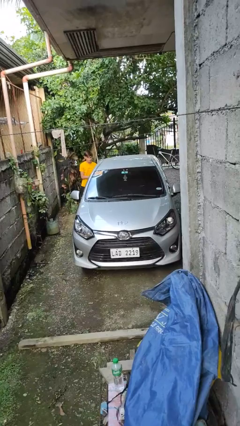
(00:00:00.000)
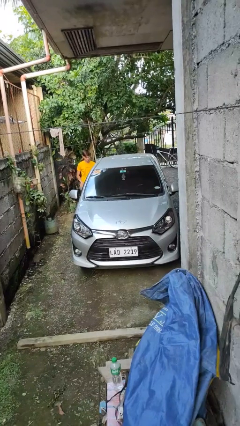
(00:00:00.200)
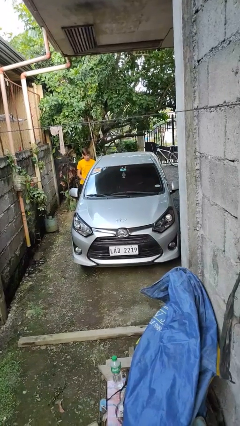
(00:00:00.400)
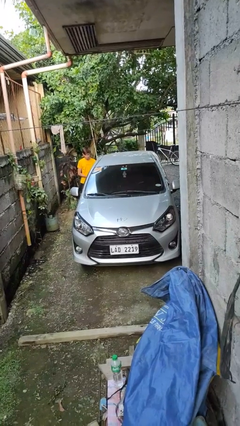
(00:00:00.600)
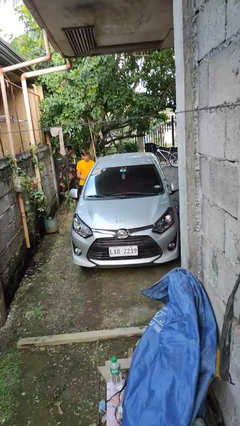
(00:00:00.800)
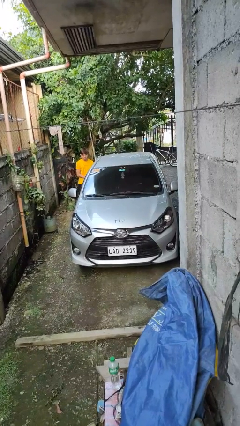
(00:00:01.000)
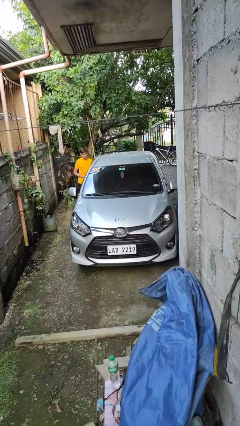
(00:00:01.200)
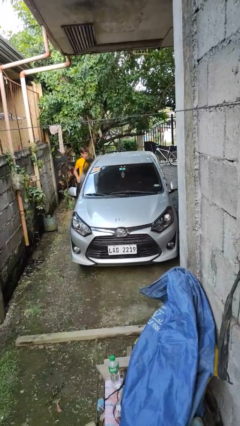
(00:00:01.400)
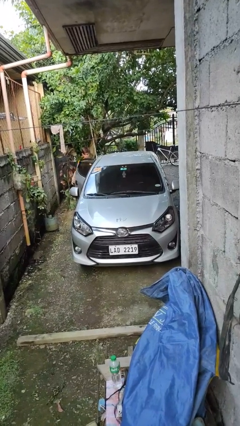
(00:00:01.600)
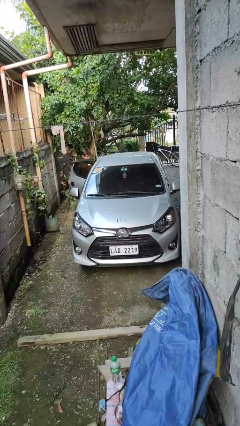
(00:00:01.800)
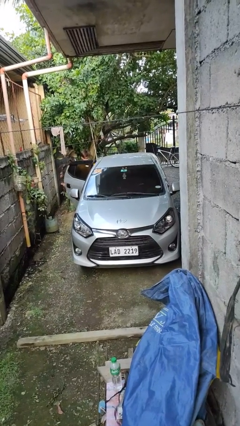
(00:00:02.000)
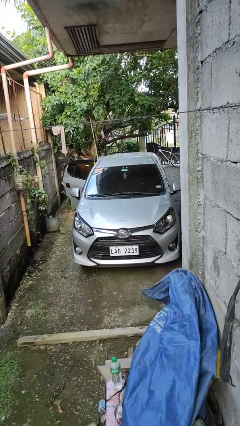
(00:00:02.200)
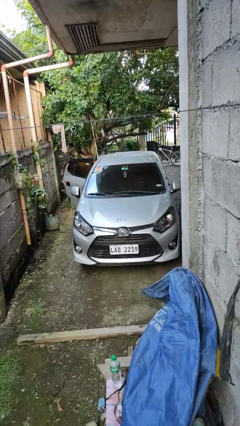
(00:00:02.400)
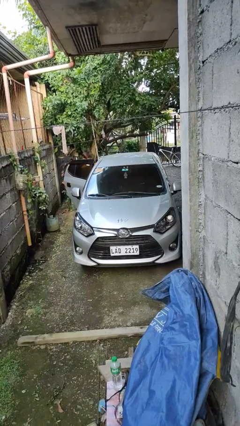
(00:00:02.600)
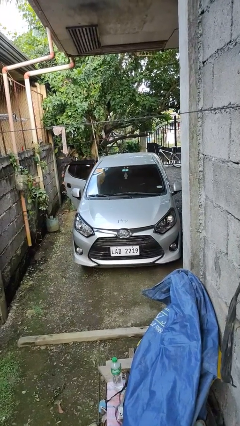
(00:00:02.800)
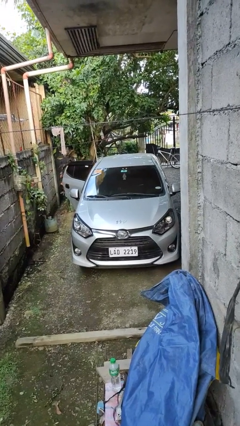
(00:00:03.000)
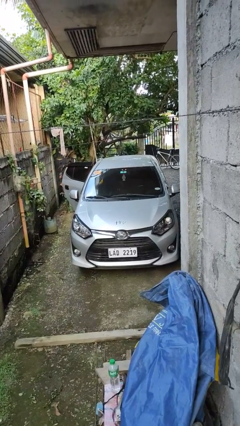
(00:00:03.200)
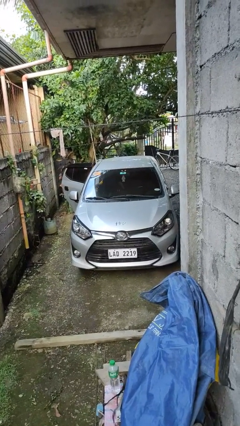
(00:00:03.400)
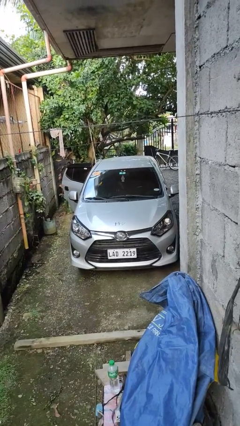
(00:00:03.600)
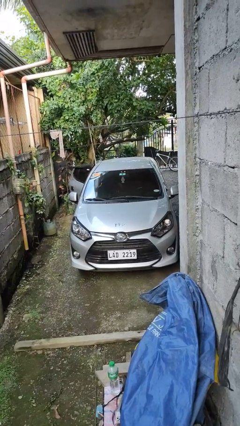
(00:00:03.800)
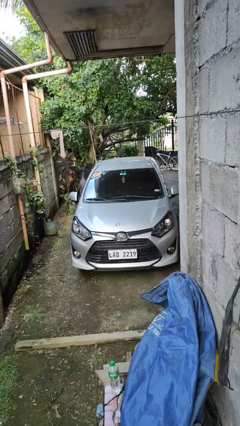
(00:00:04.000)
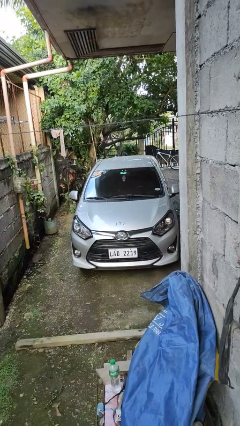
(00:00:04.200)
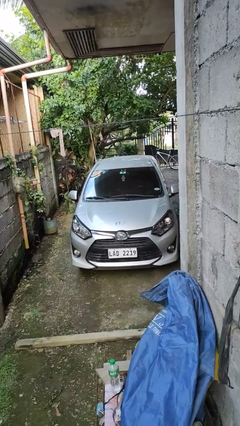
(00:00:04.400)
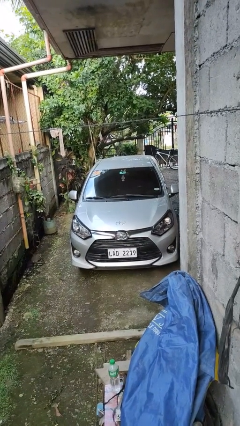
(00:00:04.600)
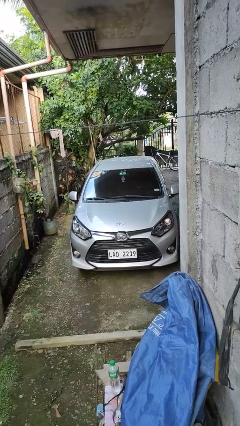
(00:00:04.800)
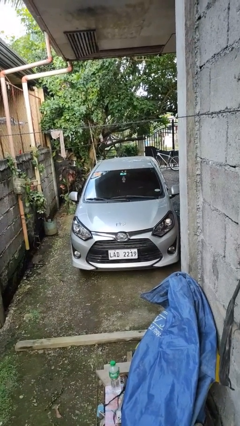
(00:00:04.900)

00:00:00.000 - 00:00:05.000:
car picks up person

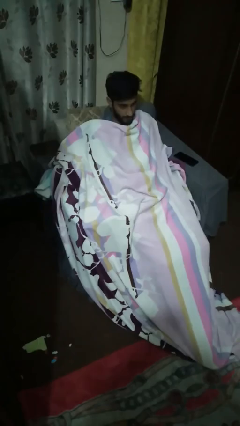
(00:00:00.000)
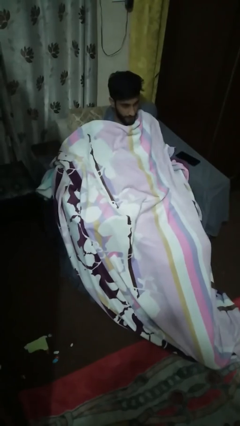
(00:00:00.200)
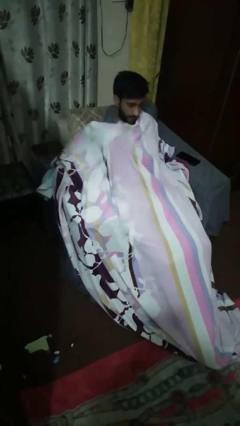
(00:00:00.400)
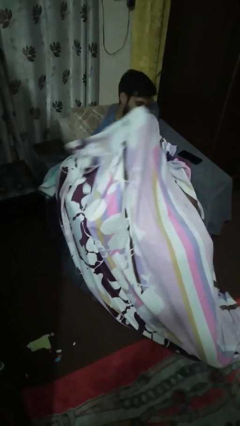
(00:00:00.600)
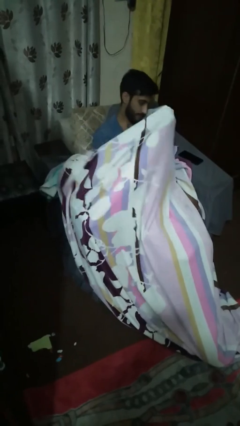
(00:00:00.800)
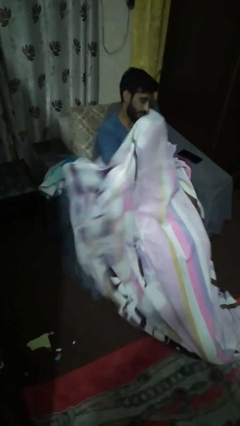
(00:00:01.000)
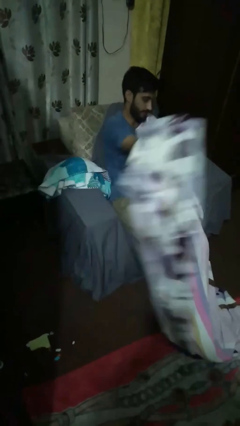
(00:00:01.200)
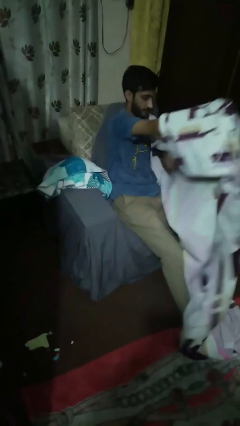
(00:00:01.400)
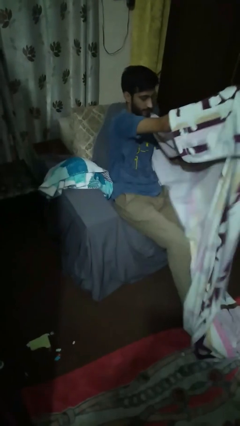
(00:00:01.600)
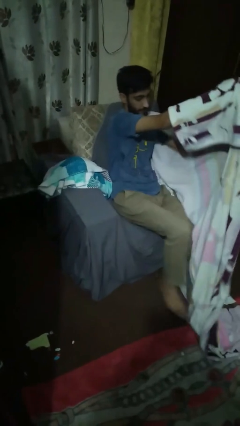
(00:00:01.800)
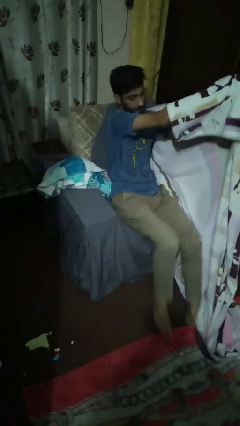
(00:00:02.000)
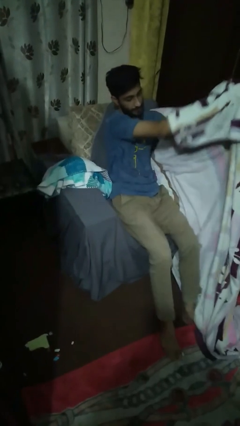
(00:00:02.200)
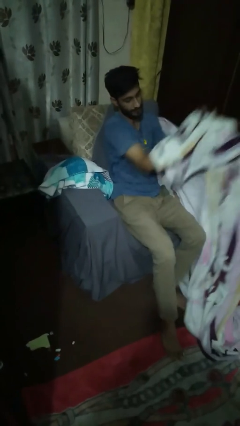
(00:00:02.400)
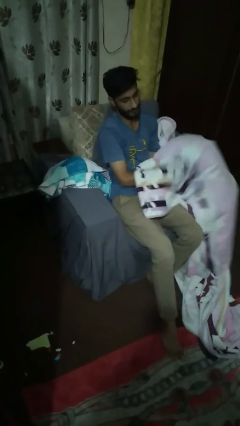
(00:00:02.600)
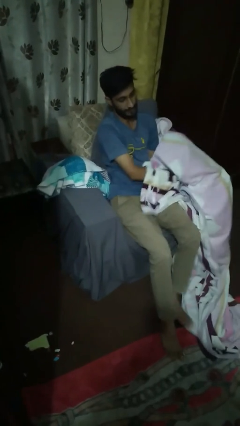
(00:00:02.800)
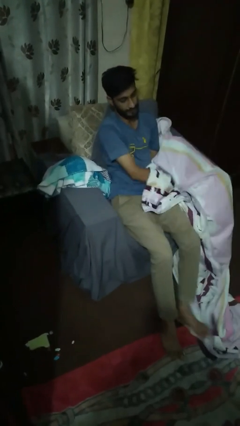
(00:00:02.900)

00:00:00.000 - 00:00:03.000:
person uncovers with blanket

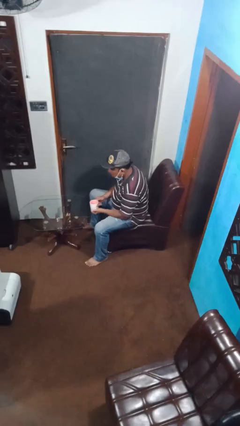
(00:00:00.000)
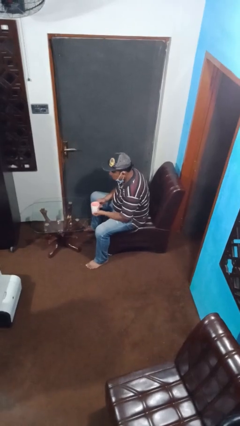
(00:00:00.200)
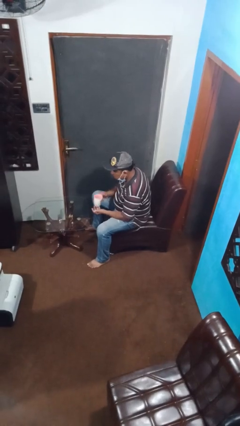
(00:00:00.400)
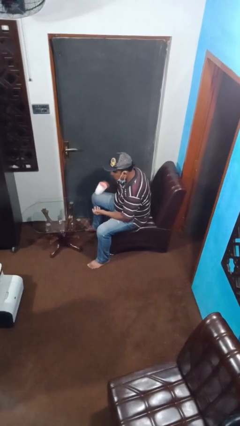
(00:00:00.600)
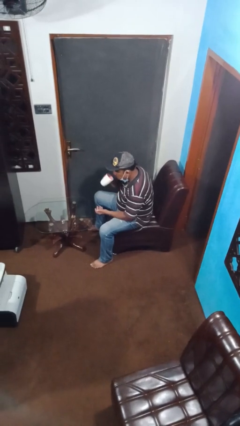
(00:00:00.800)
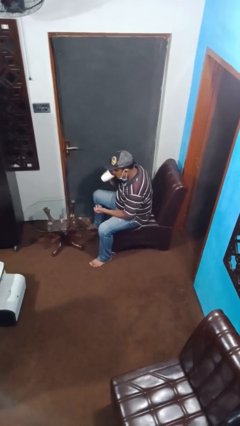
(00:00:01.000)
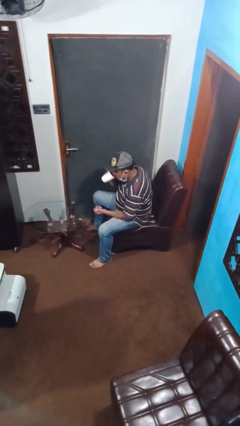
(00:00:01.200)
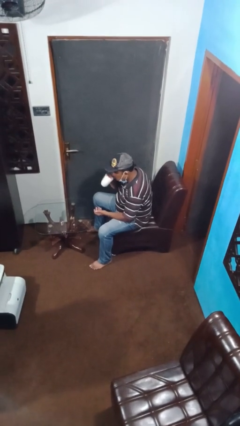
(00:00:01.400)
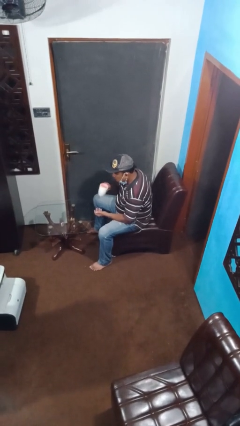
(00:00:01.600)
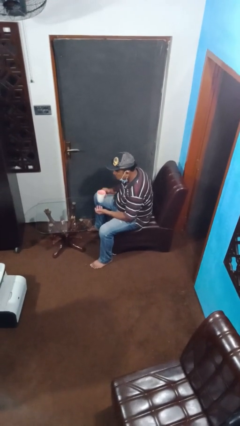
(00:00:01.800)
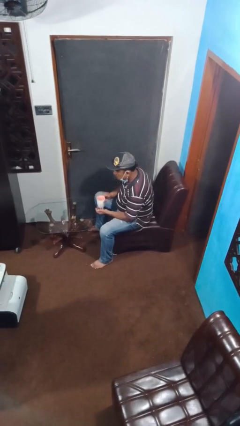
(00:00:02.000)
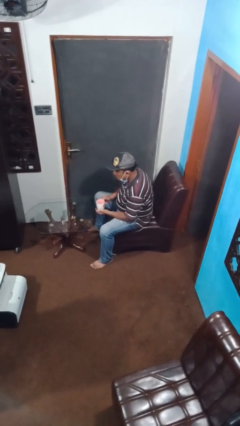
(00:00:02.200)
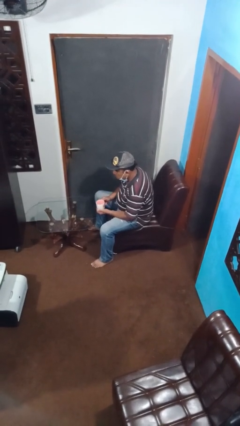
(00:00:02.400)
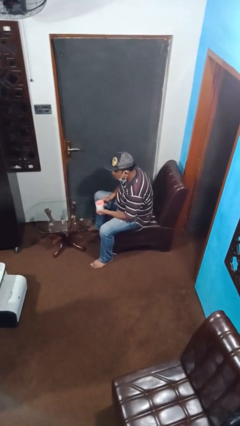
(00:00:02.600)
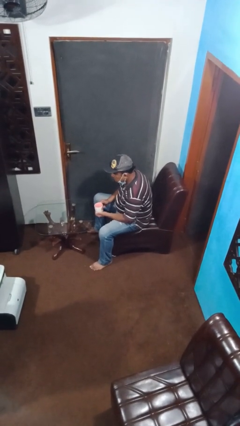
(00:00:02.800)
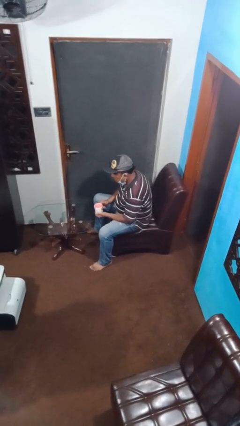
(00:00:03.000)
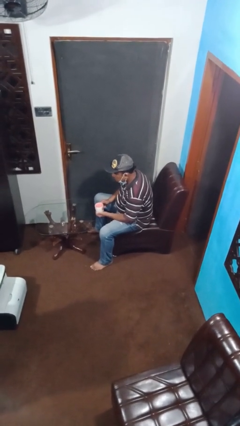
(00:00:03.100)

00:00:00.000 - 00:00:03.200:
person drinks from mug

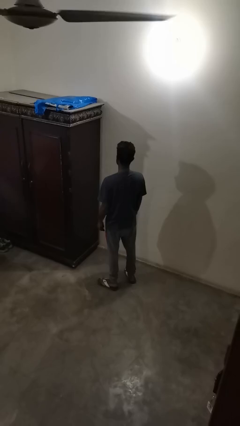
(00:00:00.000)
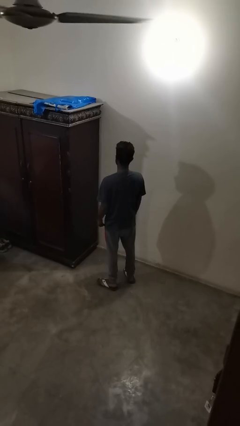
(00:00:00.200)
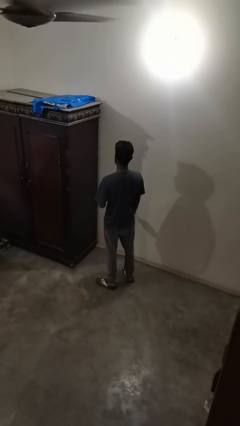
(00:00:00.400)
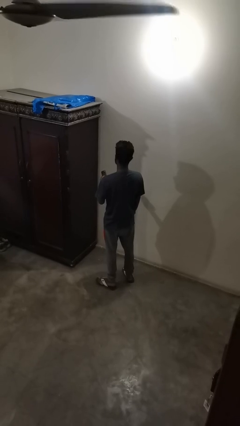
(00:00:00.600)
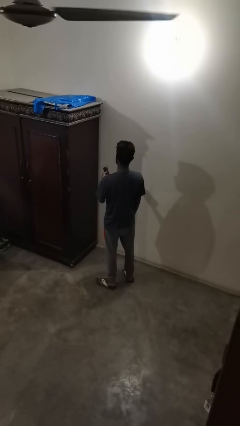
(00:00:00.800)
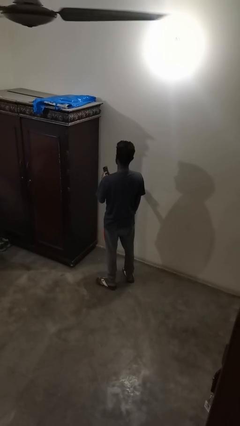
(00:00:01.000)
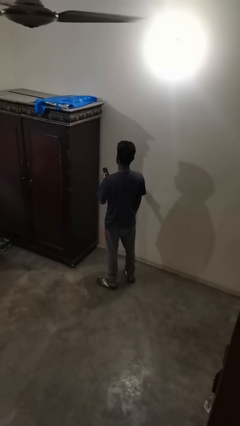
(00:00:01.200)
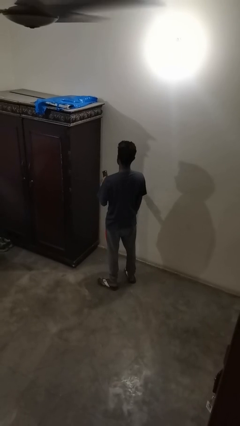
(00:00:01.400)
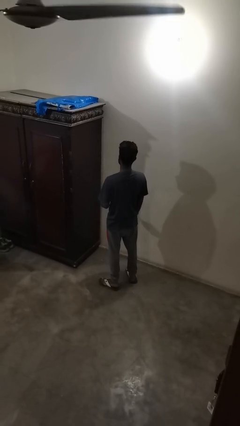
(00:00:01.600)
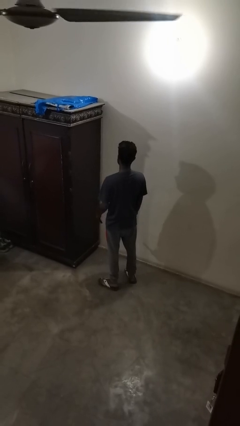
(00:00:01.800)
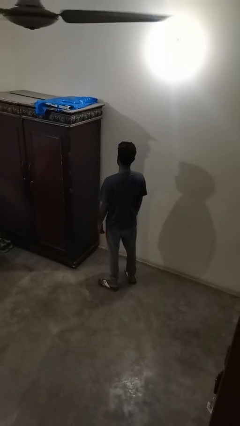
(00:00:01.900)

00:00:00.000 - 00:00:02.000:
person uses television remote

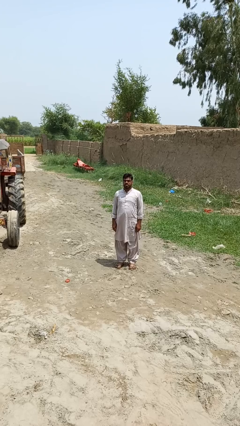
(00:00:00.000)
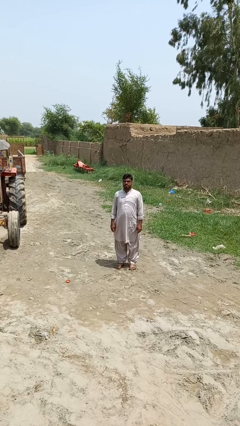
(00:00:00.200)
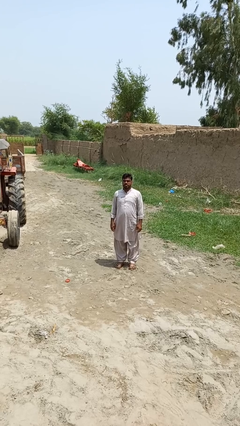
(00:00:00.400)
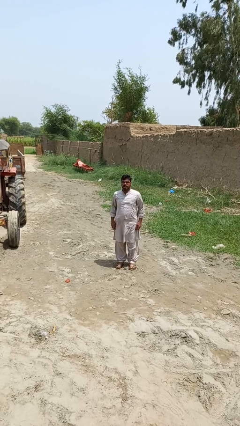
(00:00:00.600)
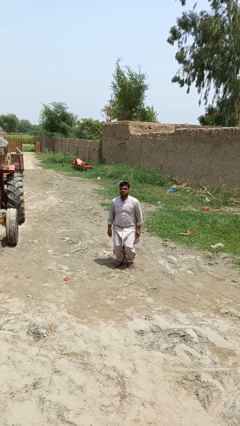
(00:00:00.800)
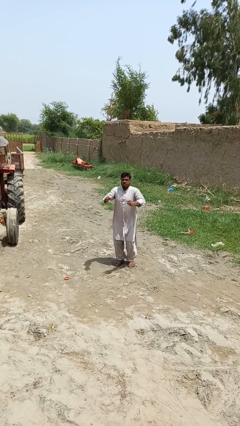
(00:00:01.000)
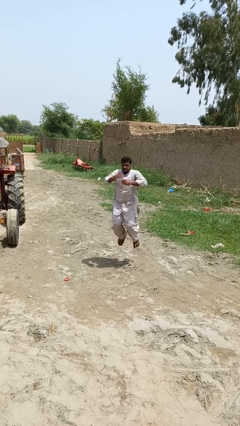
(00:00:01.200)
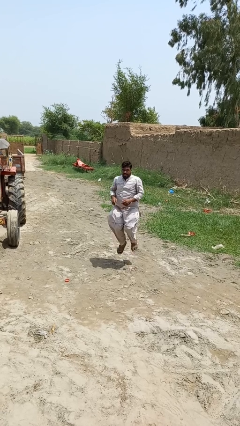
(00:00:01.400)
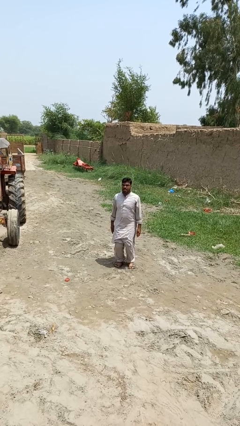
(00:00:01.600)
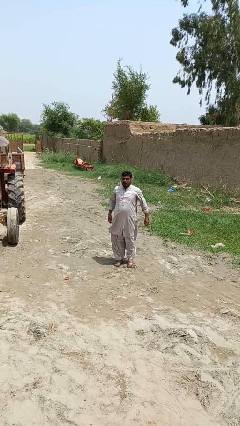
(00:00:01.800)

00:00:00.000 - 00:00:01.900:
person jumps

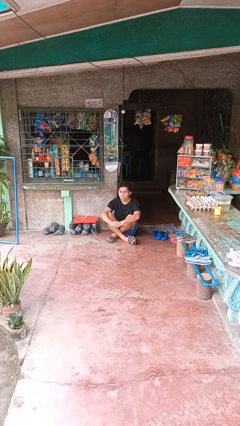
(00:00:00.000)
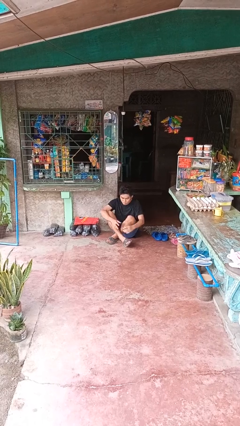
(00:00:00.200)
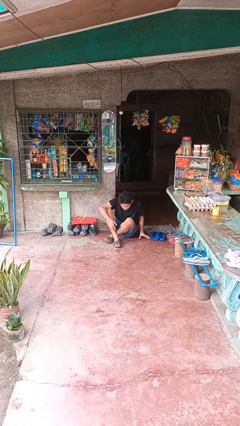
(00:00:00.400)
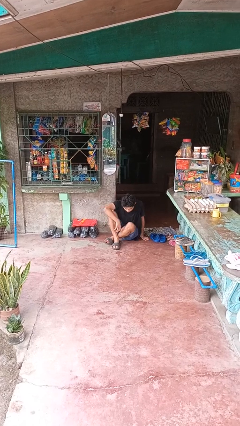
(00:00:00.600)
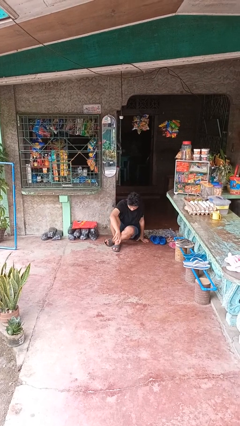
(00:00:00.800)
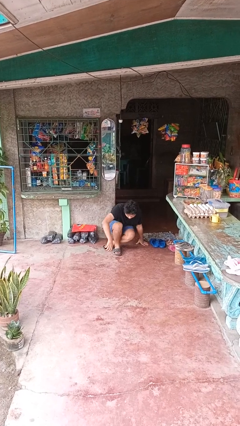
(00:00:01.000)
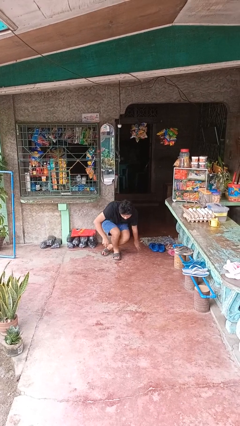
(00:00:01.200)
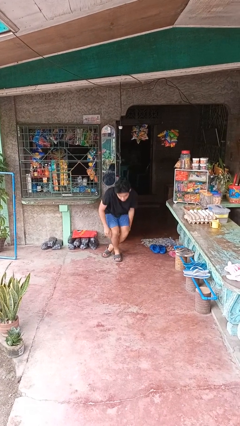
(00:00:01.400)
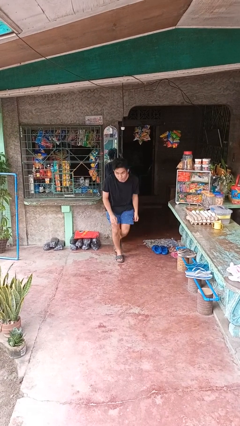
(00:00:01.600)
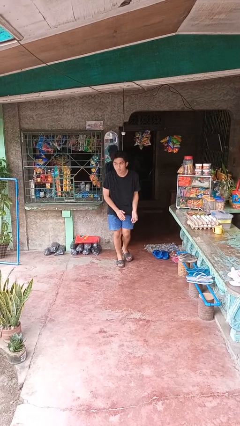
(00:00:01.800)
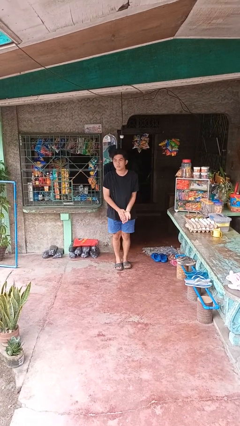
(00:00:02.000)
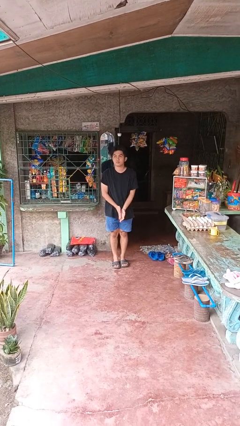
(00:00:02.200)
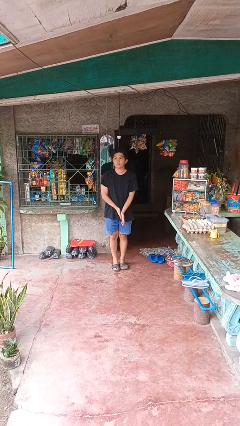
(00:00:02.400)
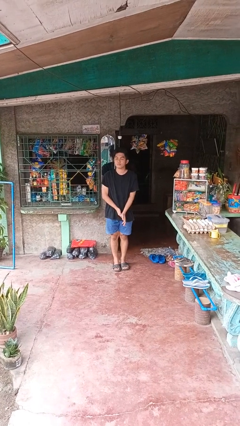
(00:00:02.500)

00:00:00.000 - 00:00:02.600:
person stands up from floor
